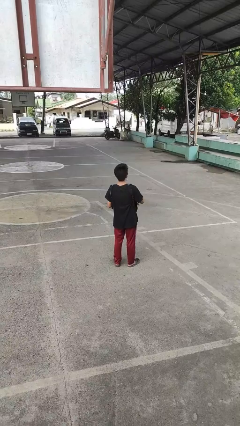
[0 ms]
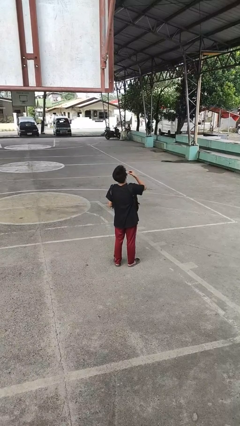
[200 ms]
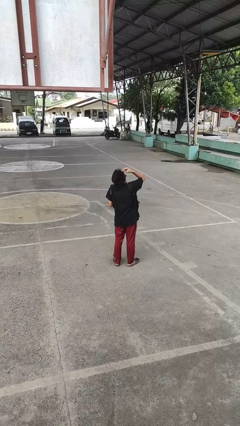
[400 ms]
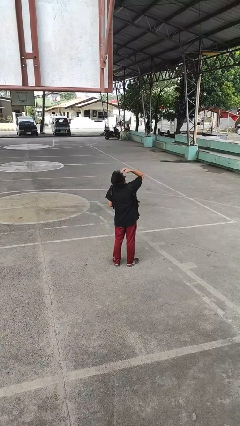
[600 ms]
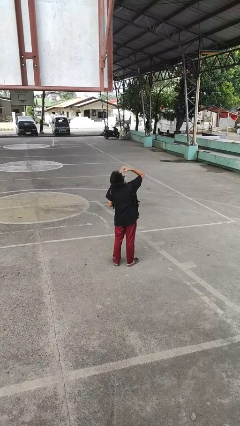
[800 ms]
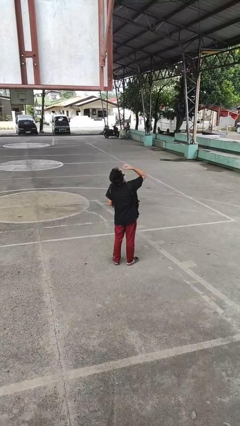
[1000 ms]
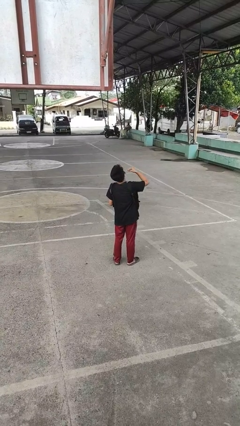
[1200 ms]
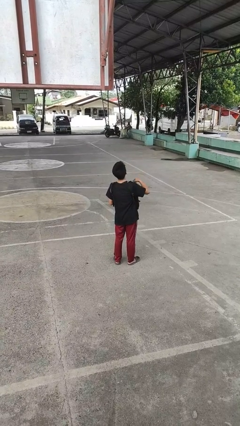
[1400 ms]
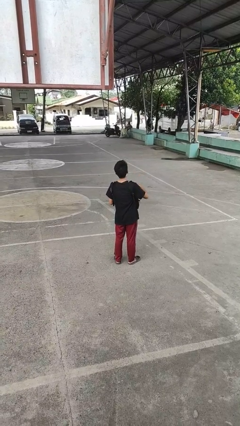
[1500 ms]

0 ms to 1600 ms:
person eats snack from bag

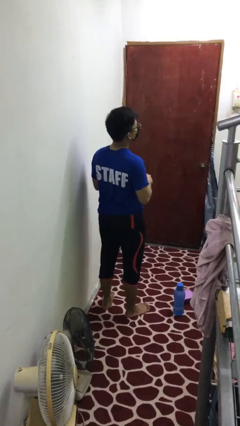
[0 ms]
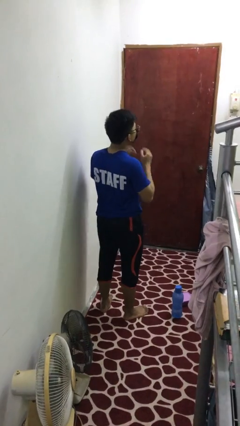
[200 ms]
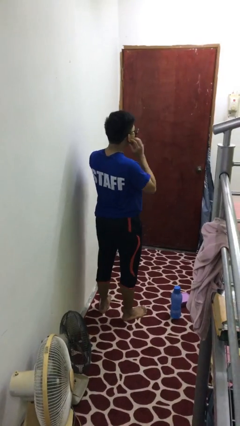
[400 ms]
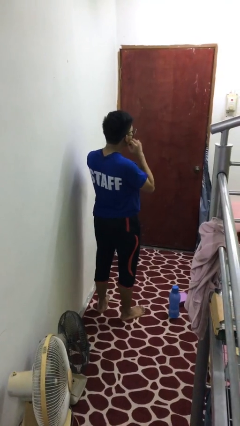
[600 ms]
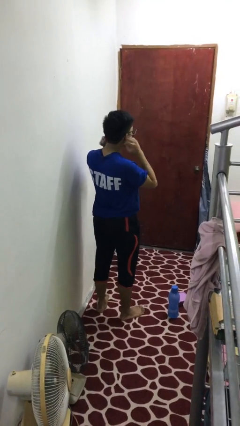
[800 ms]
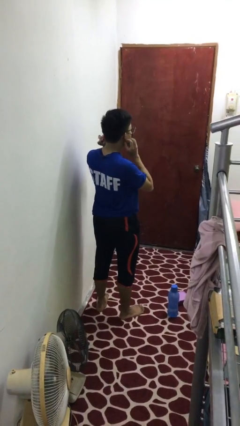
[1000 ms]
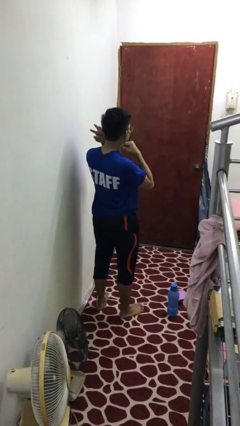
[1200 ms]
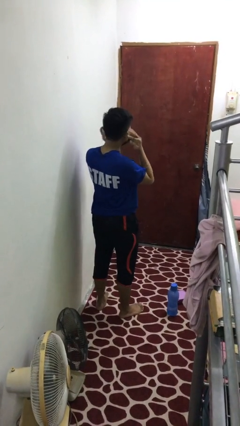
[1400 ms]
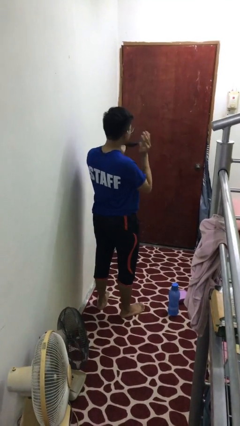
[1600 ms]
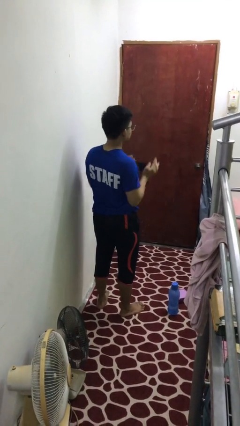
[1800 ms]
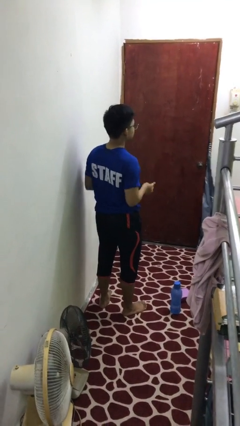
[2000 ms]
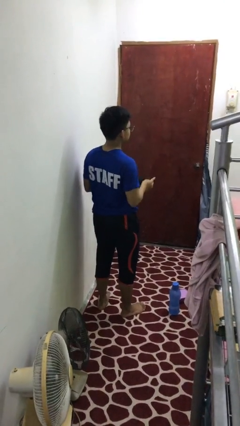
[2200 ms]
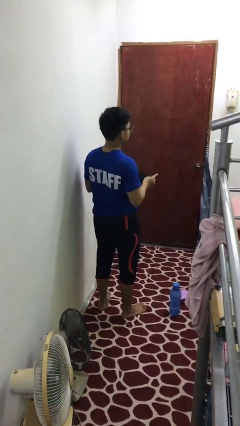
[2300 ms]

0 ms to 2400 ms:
person takes off facemask

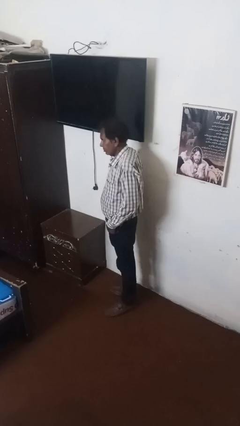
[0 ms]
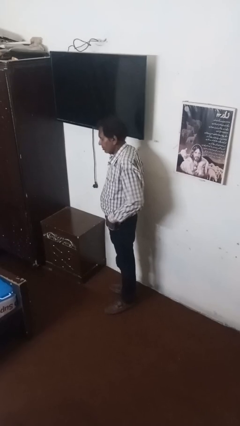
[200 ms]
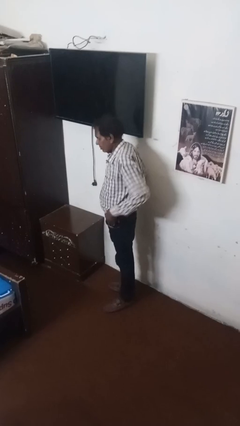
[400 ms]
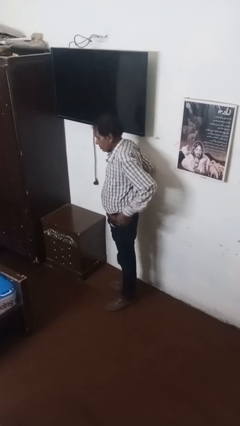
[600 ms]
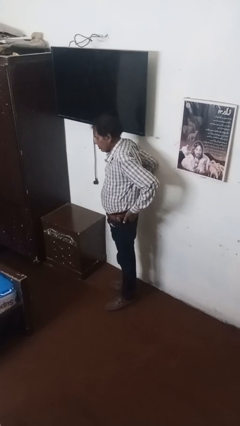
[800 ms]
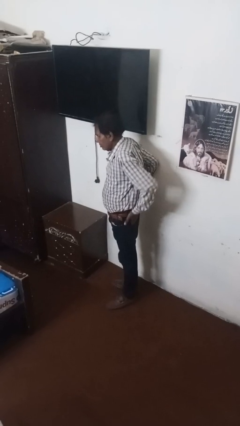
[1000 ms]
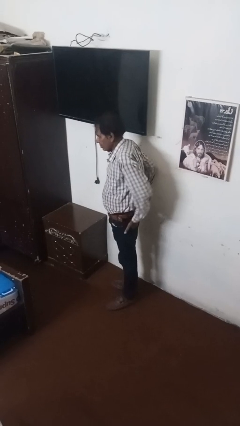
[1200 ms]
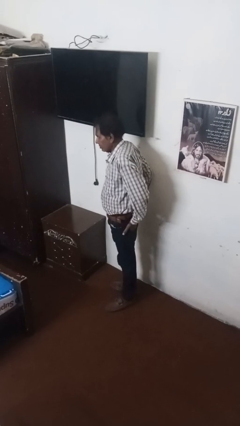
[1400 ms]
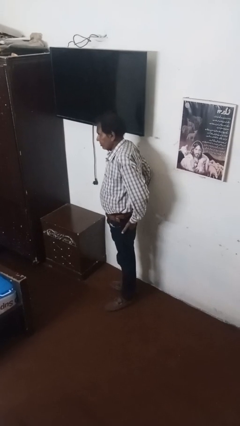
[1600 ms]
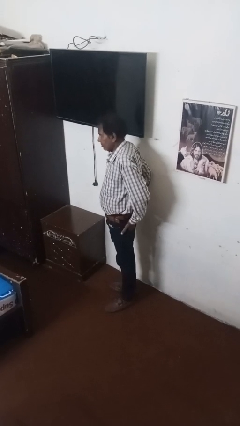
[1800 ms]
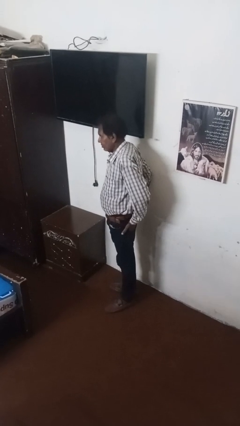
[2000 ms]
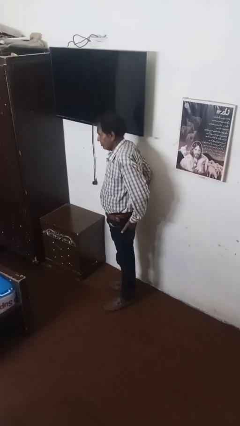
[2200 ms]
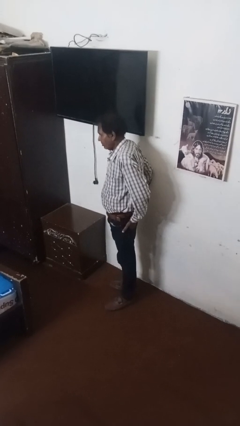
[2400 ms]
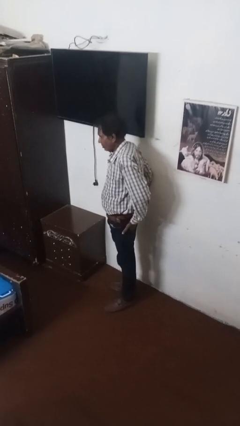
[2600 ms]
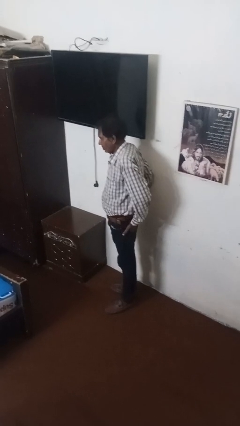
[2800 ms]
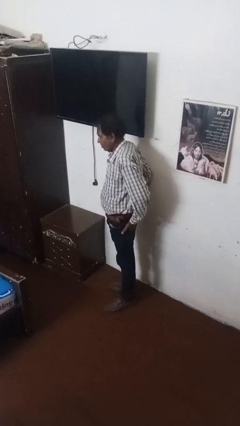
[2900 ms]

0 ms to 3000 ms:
person puts hands in back pockets

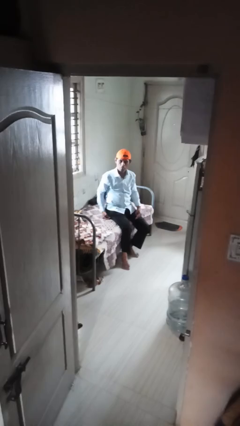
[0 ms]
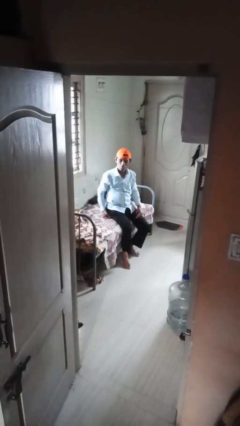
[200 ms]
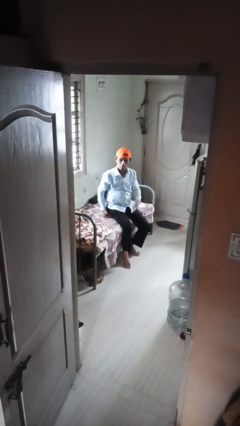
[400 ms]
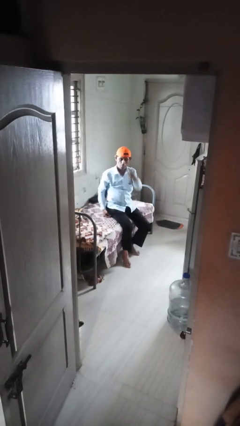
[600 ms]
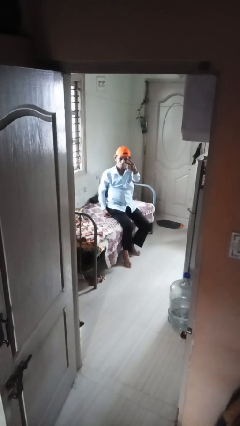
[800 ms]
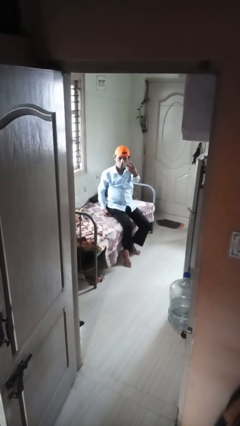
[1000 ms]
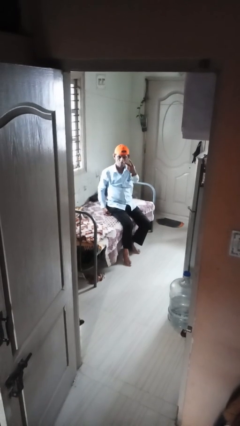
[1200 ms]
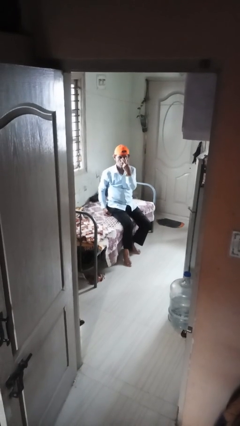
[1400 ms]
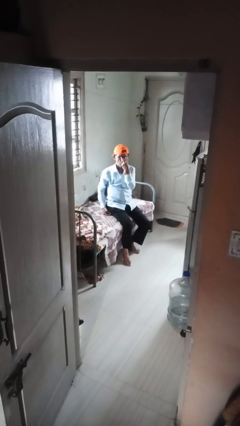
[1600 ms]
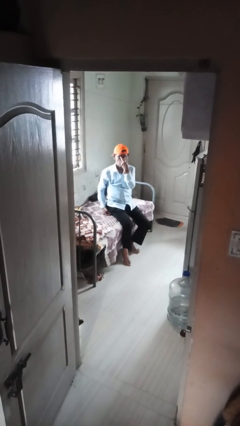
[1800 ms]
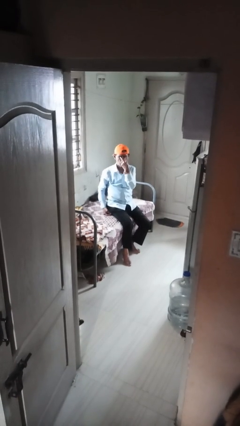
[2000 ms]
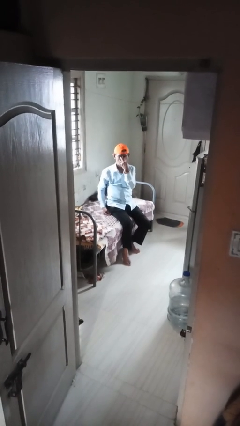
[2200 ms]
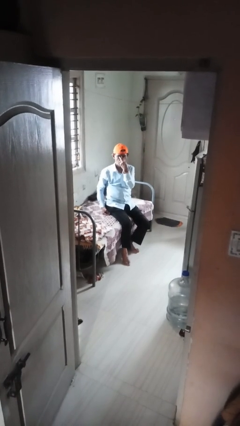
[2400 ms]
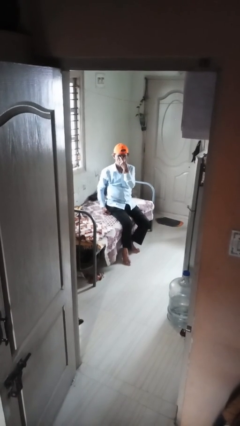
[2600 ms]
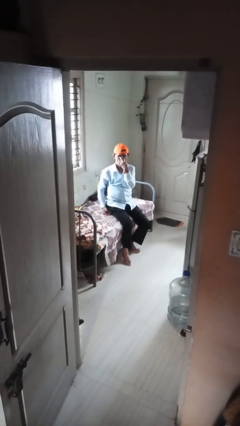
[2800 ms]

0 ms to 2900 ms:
person gestures watch closely

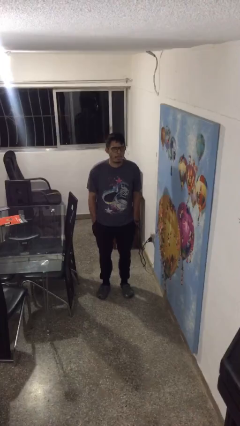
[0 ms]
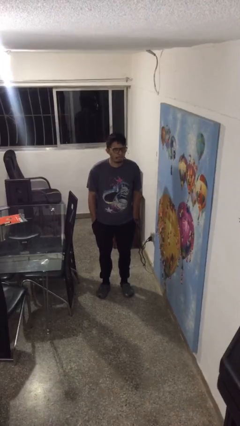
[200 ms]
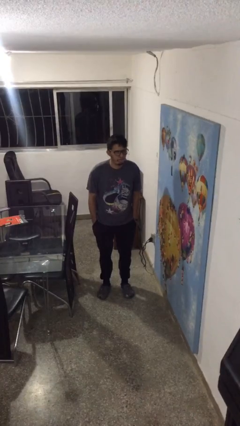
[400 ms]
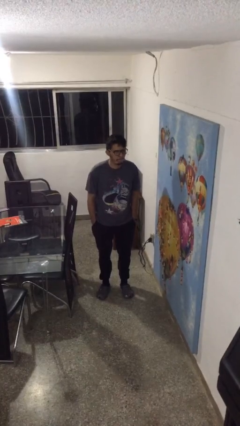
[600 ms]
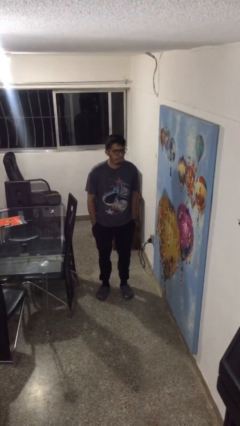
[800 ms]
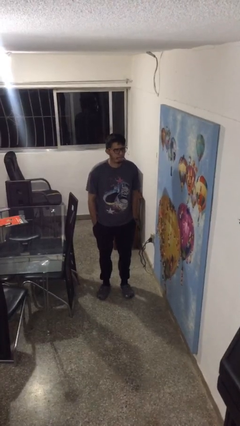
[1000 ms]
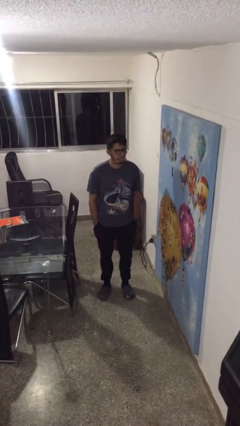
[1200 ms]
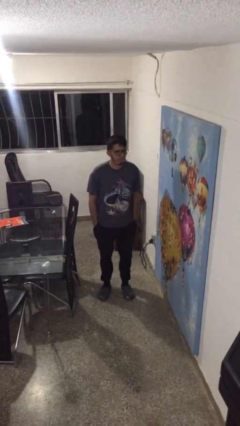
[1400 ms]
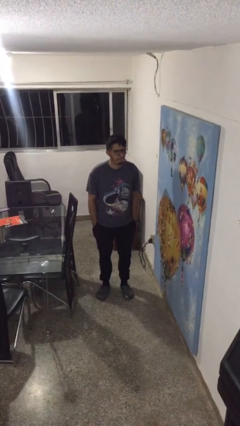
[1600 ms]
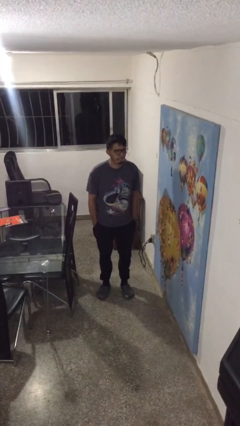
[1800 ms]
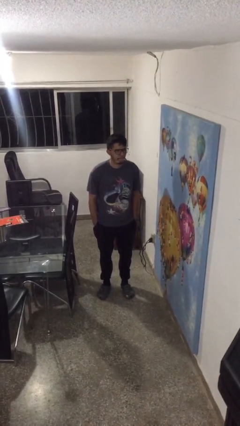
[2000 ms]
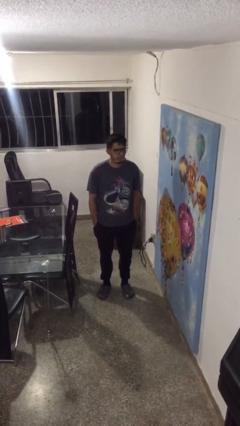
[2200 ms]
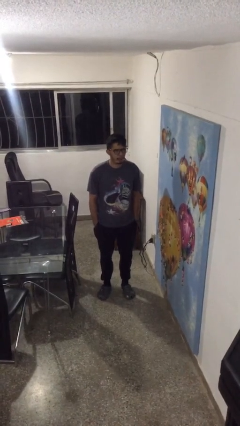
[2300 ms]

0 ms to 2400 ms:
person sticks out tongue

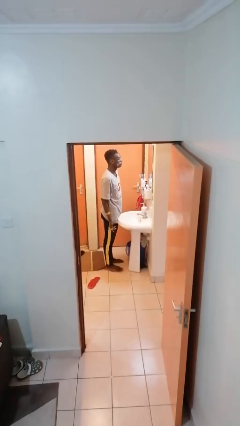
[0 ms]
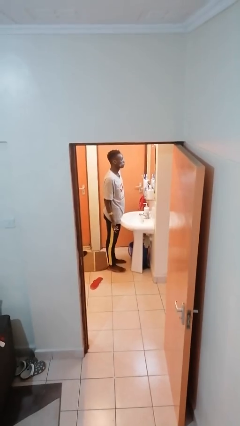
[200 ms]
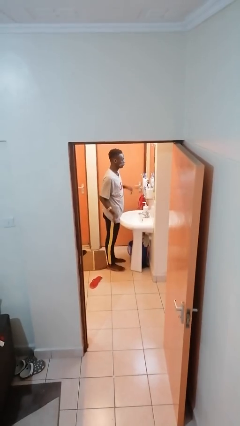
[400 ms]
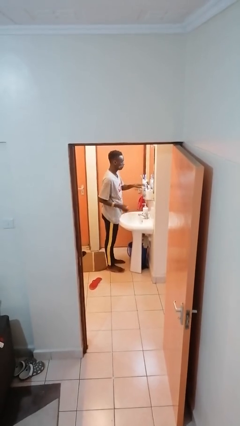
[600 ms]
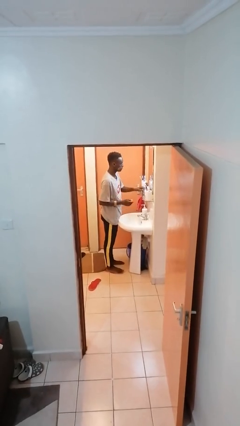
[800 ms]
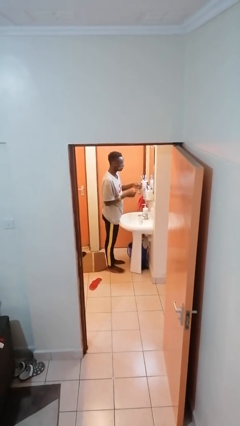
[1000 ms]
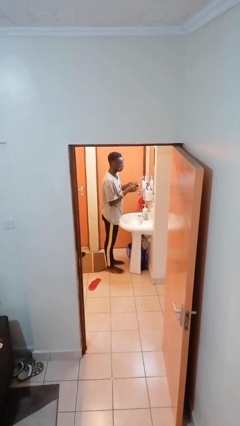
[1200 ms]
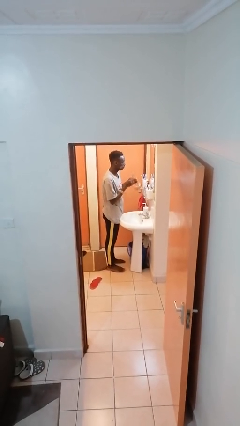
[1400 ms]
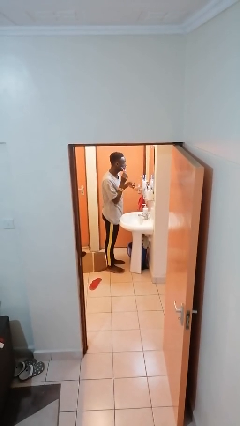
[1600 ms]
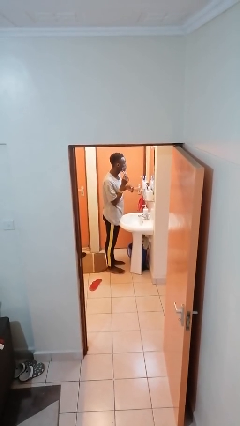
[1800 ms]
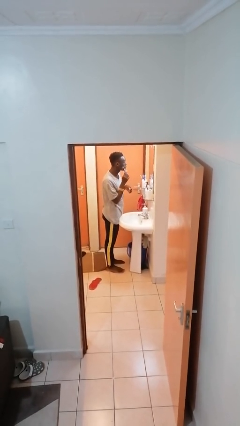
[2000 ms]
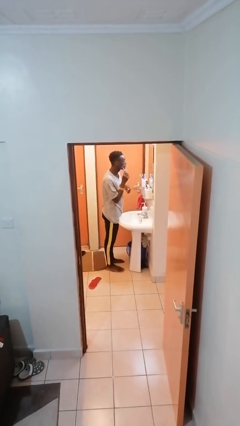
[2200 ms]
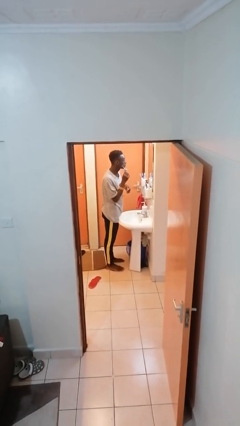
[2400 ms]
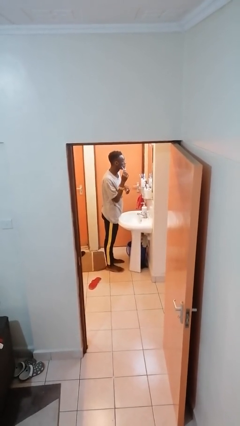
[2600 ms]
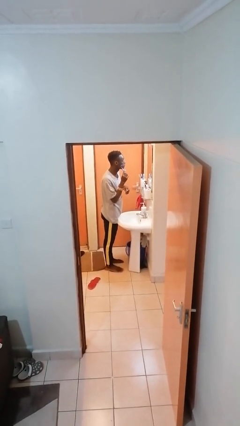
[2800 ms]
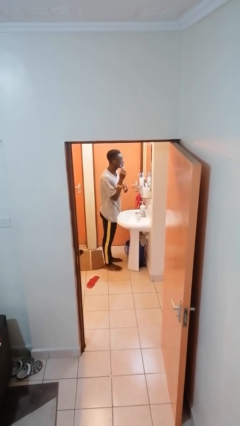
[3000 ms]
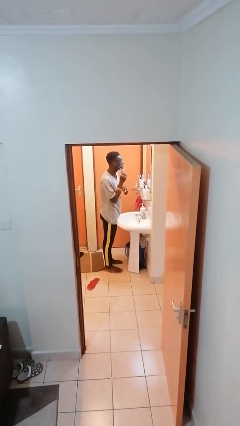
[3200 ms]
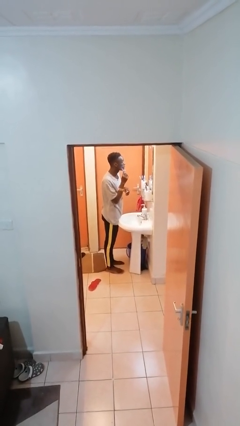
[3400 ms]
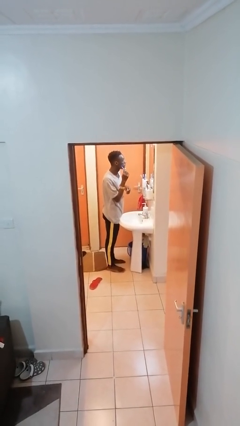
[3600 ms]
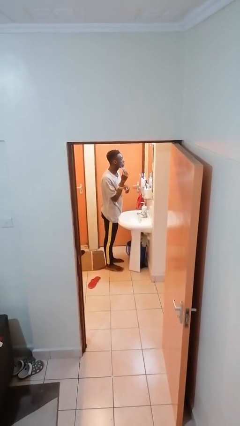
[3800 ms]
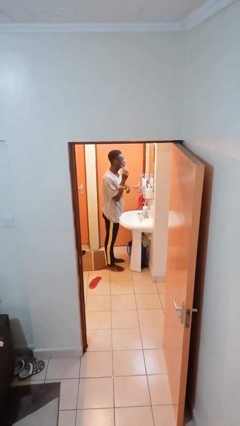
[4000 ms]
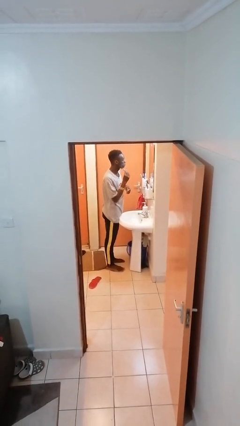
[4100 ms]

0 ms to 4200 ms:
person shaves face

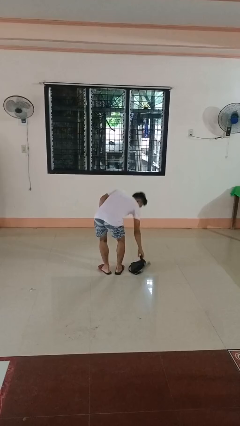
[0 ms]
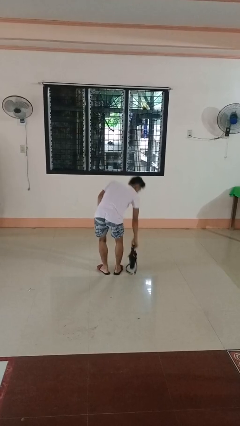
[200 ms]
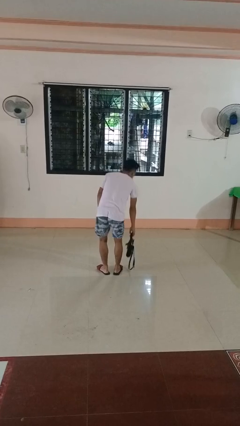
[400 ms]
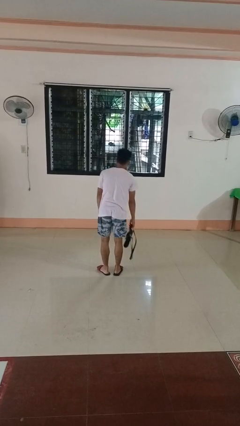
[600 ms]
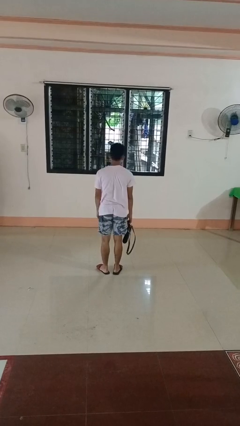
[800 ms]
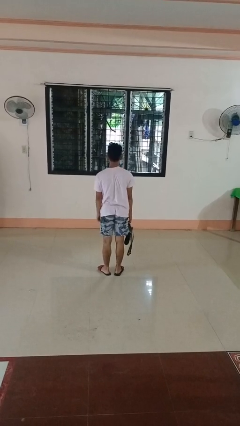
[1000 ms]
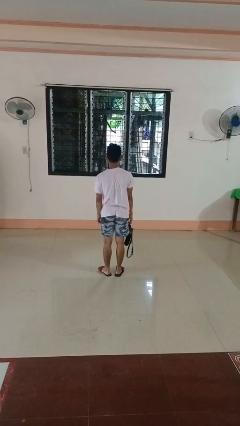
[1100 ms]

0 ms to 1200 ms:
person picks up object from floor
